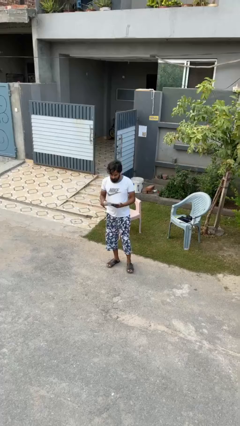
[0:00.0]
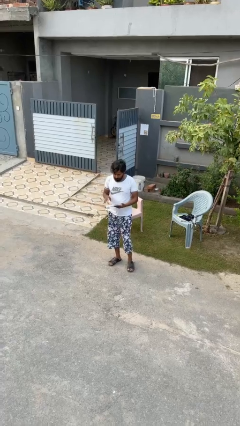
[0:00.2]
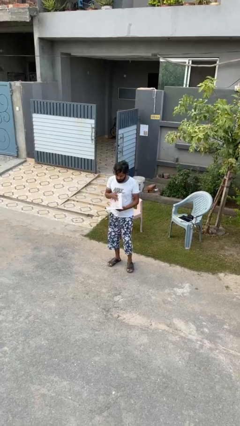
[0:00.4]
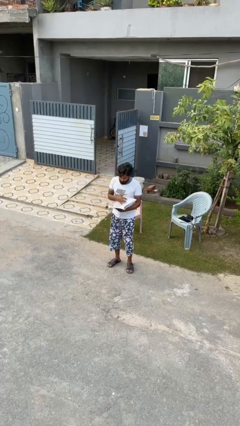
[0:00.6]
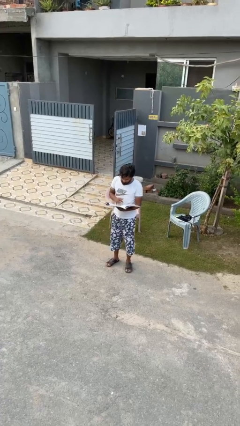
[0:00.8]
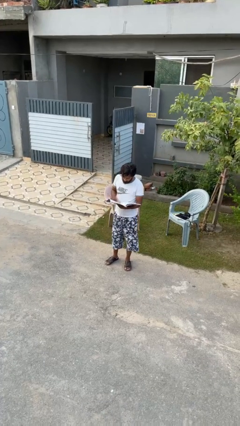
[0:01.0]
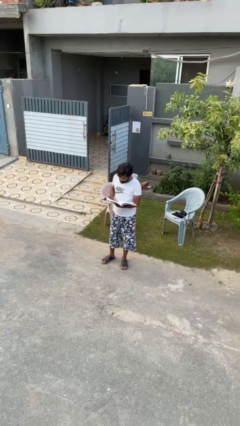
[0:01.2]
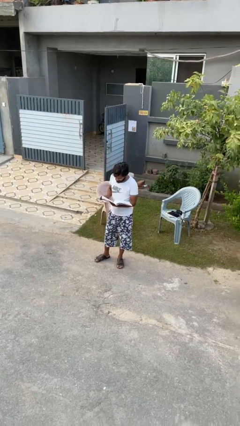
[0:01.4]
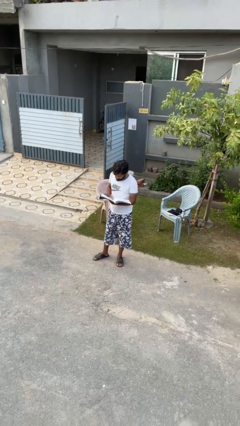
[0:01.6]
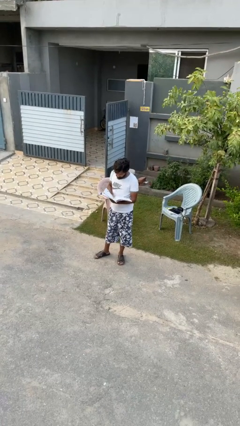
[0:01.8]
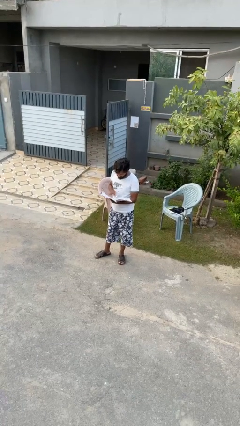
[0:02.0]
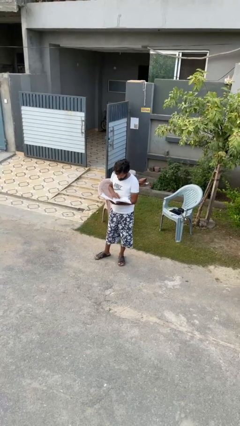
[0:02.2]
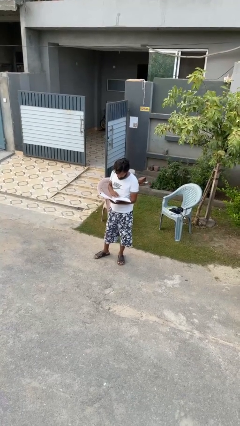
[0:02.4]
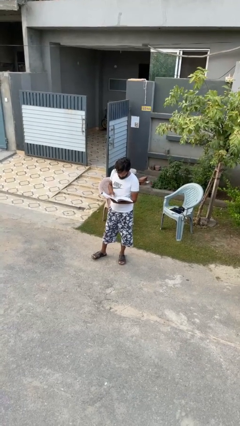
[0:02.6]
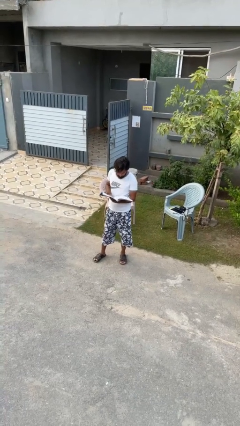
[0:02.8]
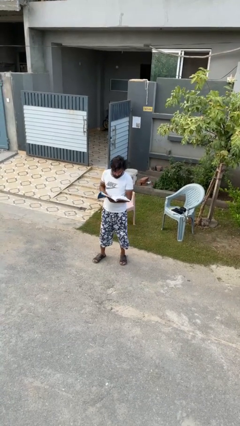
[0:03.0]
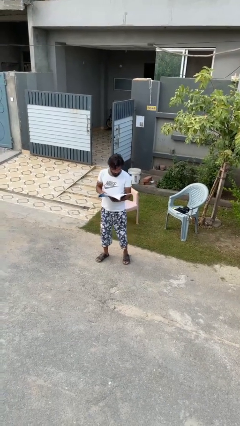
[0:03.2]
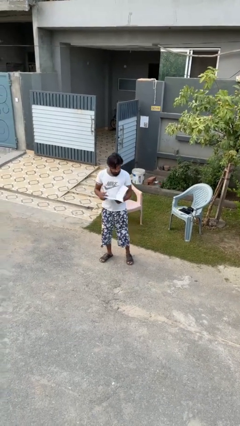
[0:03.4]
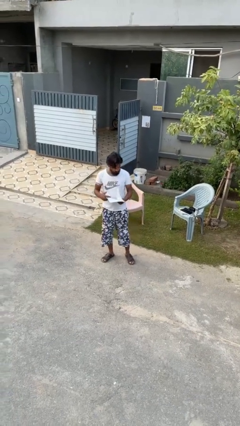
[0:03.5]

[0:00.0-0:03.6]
person reads book

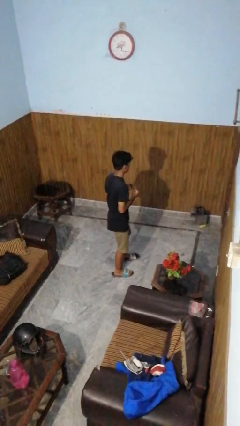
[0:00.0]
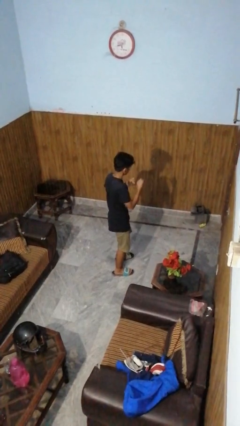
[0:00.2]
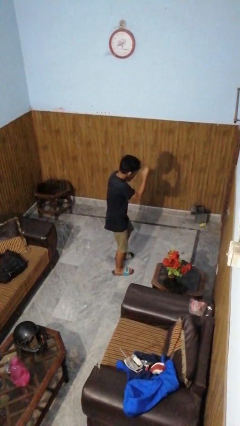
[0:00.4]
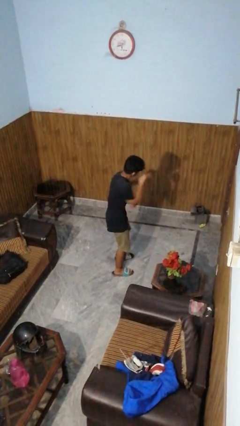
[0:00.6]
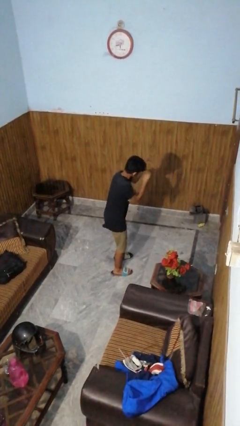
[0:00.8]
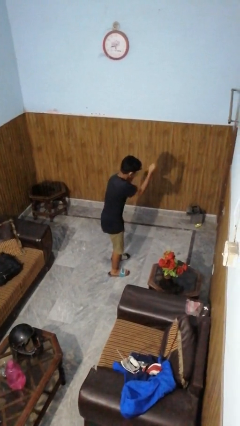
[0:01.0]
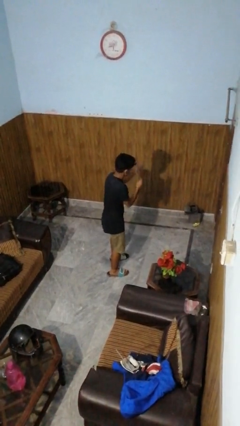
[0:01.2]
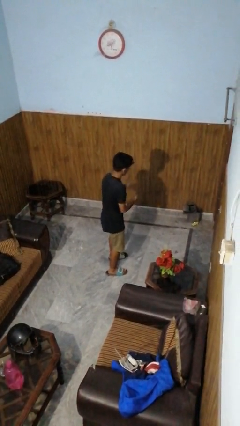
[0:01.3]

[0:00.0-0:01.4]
person punches

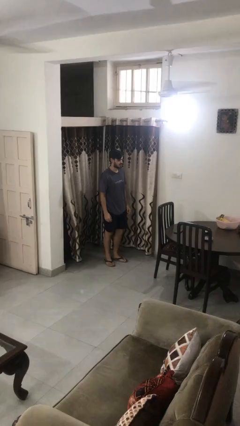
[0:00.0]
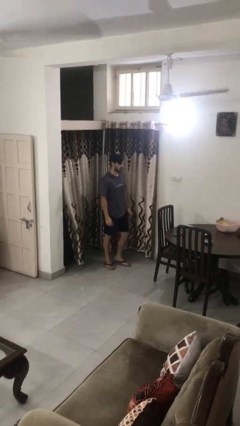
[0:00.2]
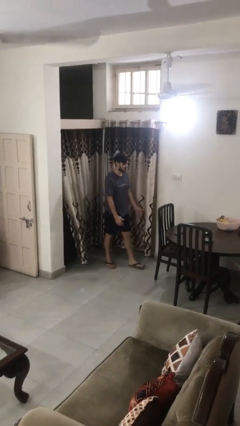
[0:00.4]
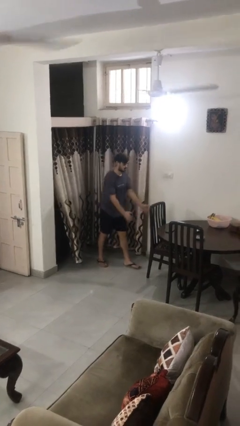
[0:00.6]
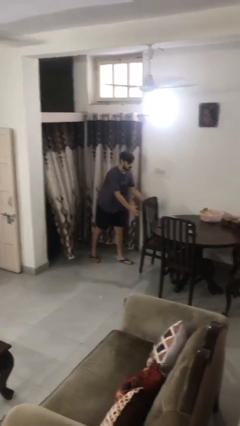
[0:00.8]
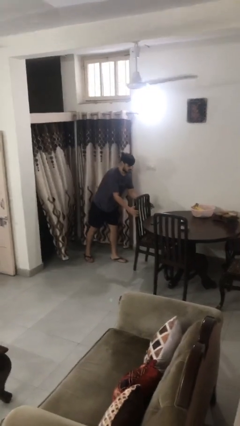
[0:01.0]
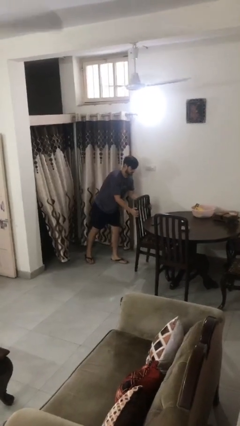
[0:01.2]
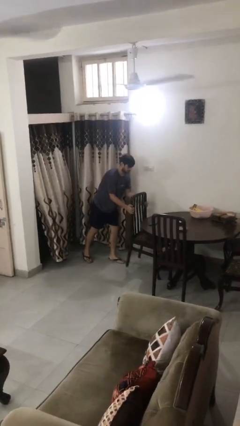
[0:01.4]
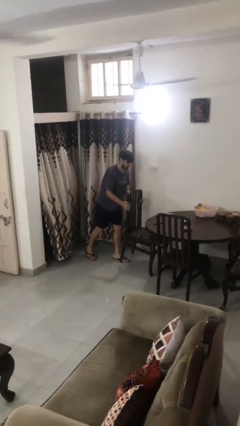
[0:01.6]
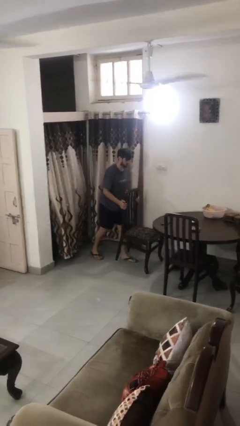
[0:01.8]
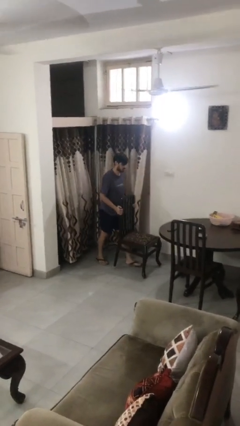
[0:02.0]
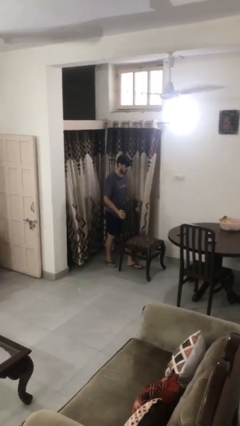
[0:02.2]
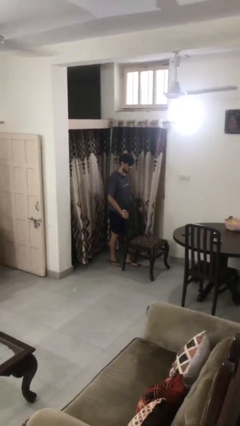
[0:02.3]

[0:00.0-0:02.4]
person pulls out chair

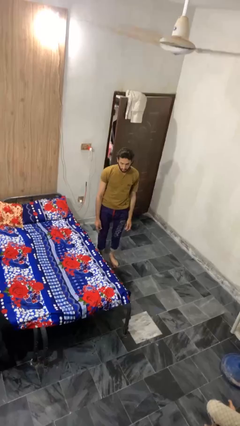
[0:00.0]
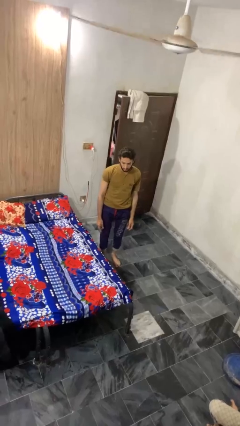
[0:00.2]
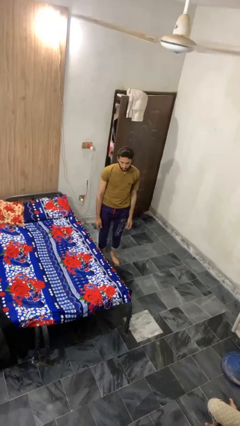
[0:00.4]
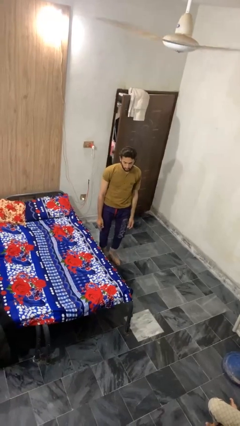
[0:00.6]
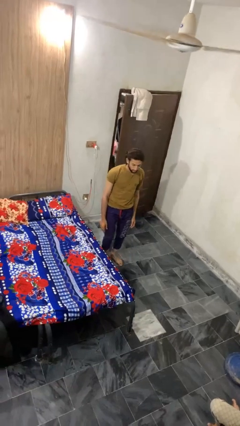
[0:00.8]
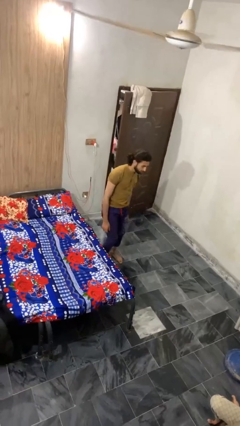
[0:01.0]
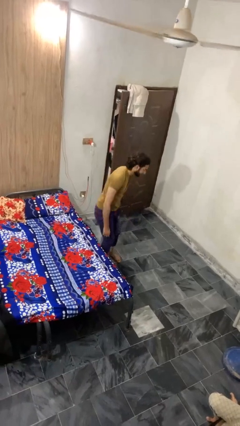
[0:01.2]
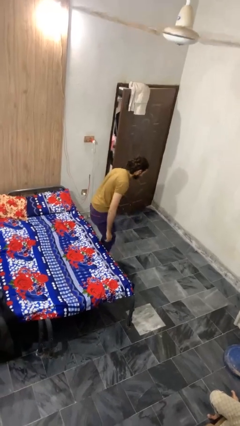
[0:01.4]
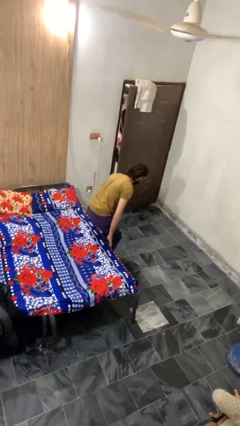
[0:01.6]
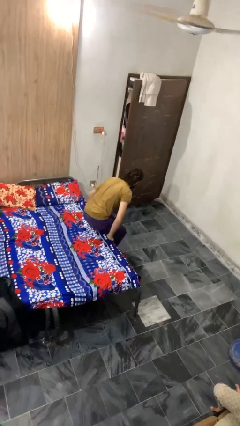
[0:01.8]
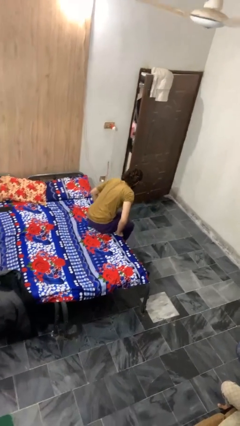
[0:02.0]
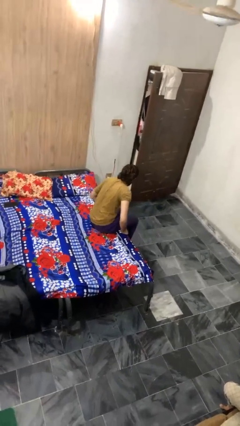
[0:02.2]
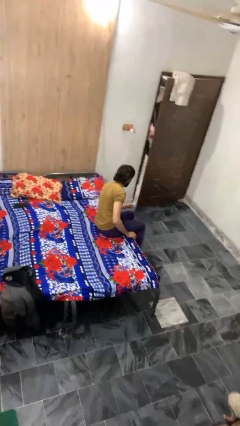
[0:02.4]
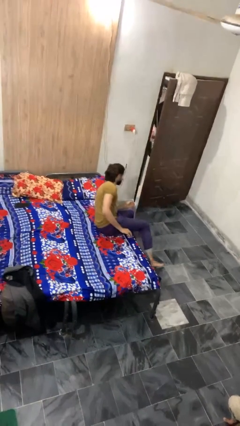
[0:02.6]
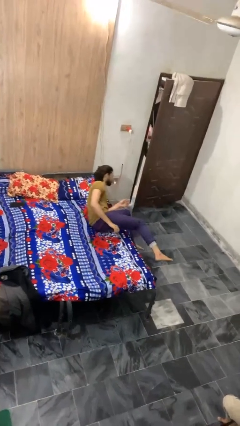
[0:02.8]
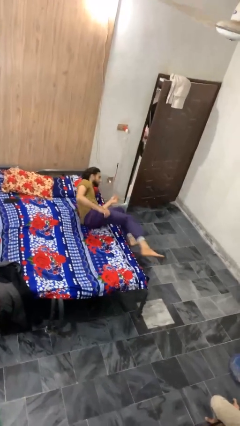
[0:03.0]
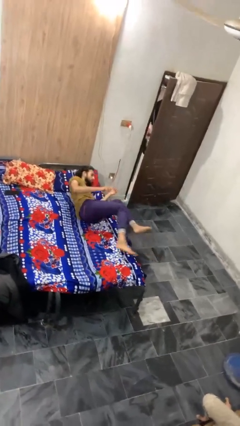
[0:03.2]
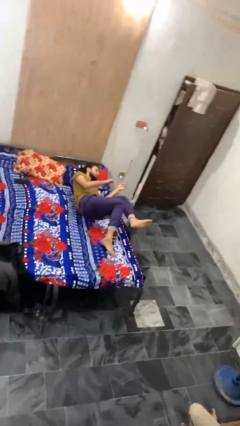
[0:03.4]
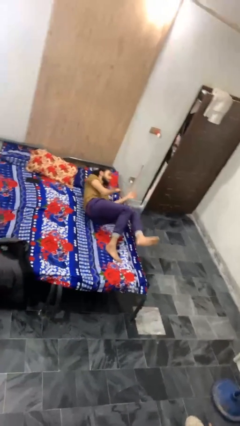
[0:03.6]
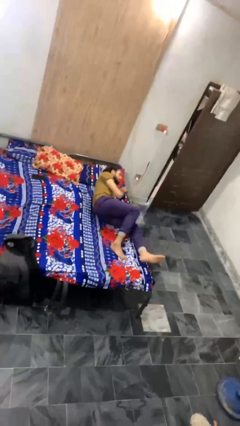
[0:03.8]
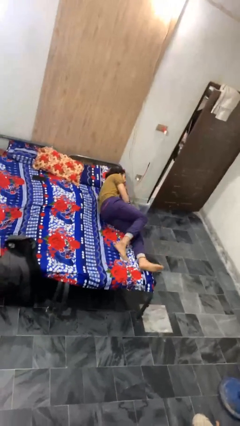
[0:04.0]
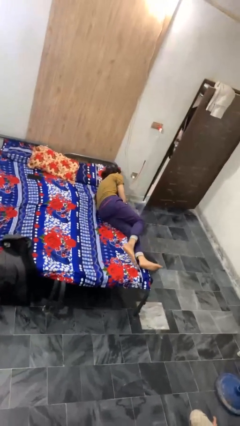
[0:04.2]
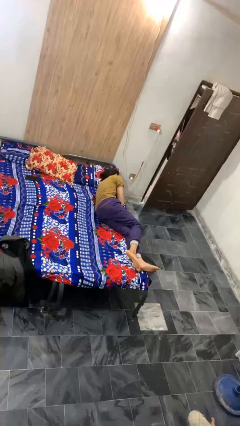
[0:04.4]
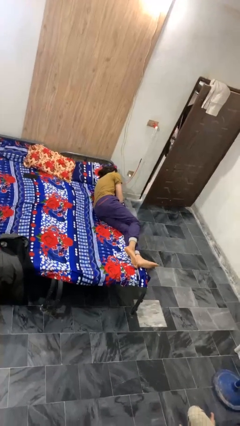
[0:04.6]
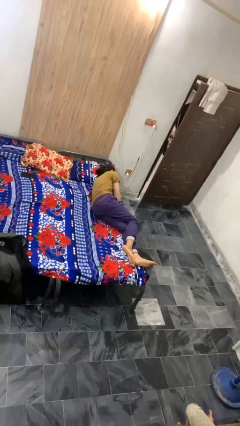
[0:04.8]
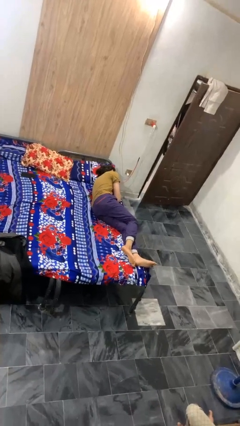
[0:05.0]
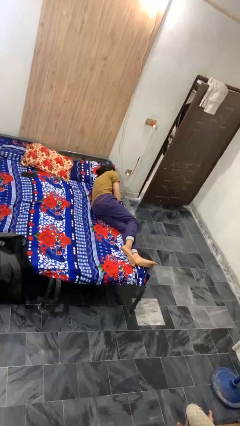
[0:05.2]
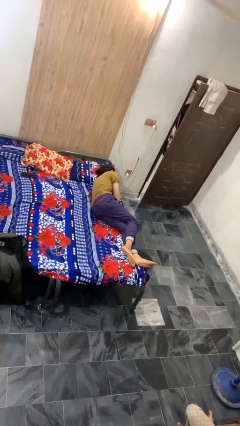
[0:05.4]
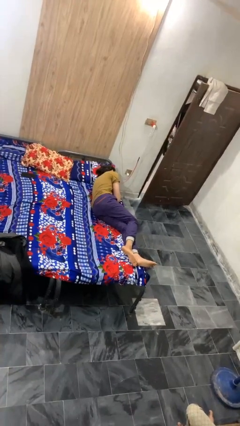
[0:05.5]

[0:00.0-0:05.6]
person lies down on bed

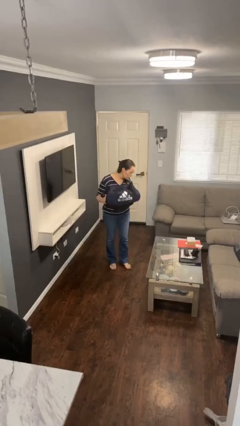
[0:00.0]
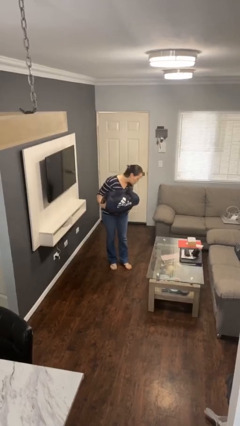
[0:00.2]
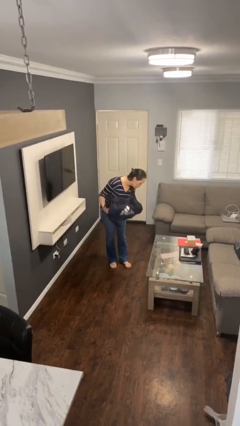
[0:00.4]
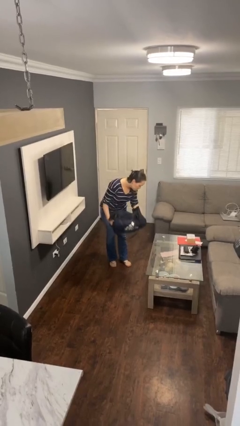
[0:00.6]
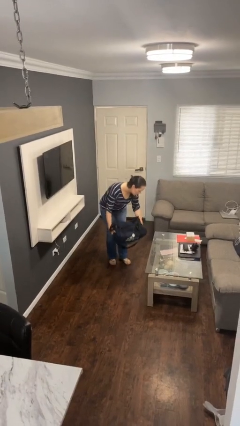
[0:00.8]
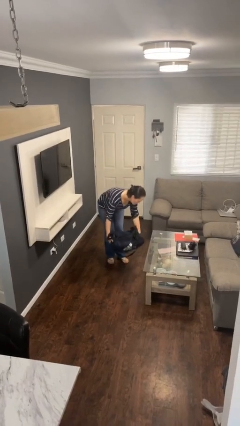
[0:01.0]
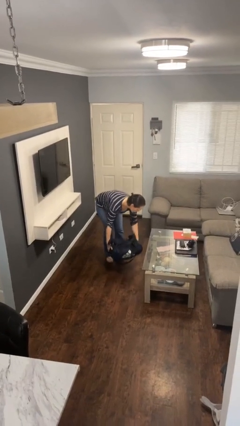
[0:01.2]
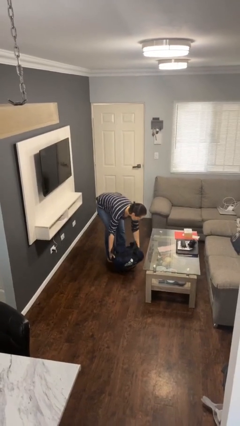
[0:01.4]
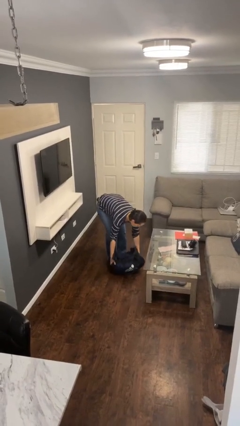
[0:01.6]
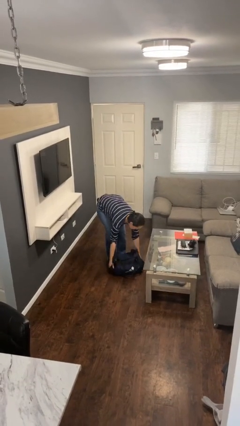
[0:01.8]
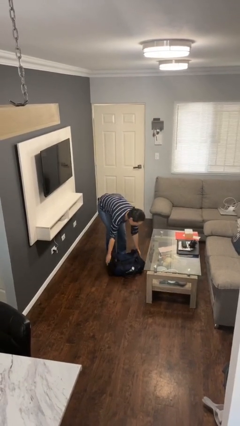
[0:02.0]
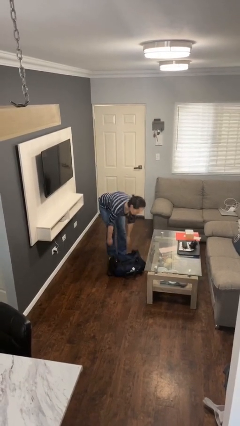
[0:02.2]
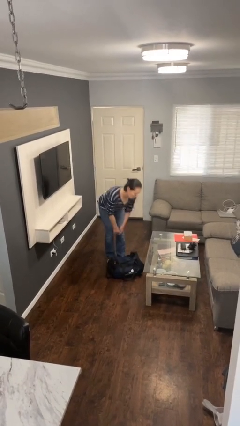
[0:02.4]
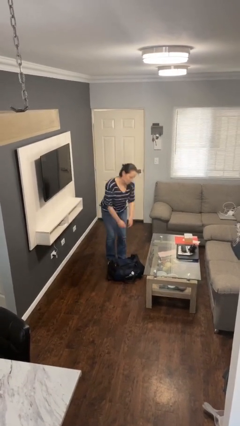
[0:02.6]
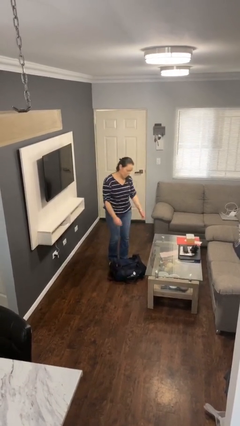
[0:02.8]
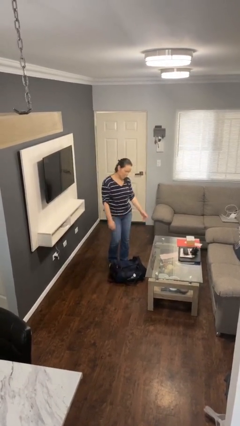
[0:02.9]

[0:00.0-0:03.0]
person puts down object on floor

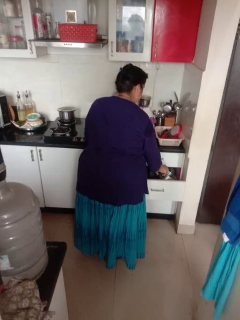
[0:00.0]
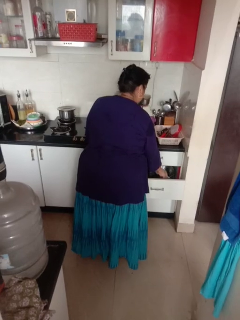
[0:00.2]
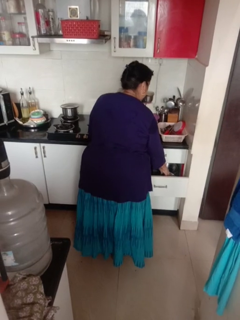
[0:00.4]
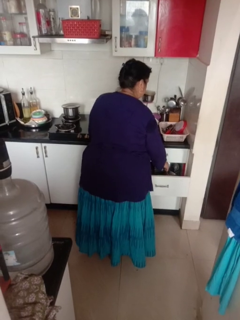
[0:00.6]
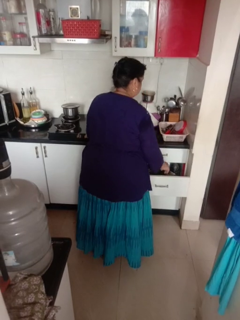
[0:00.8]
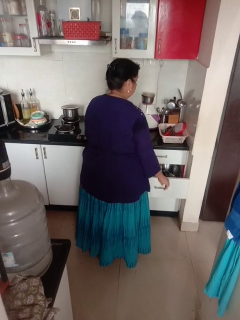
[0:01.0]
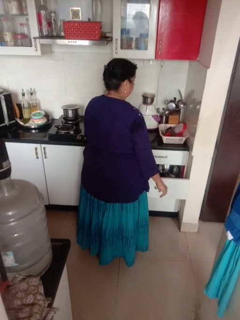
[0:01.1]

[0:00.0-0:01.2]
person puts object into kitchen drawer

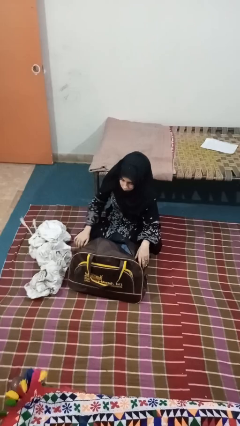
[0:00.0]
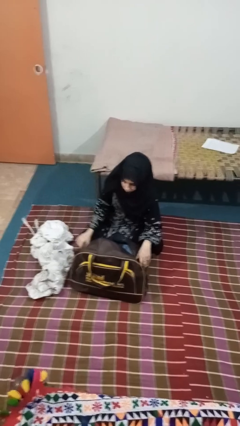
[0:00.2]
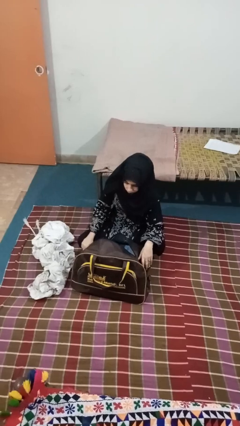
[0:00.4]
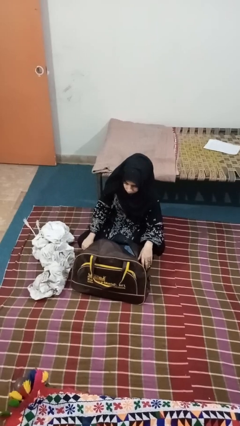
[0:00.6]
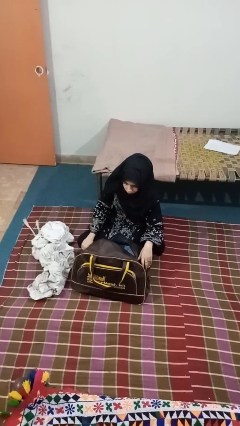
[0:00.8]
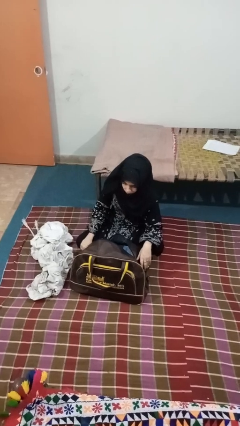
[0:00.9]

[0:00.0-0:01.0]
person unloads clothes from suitcase
